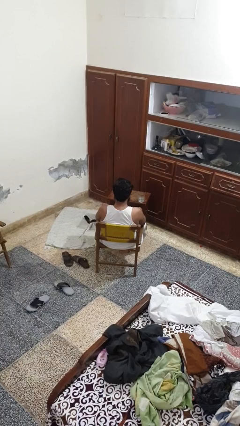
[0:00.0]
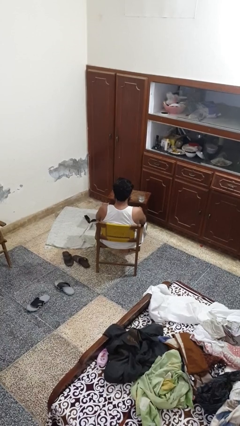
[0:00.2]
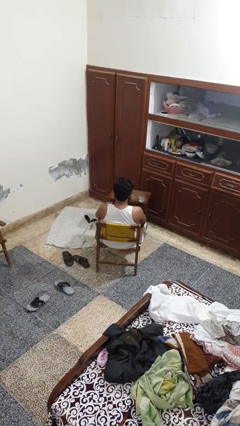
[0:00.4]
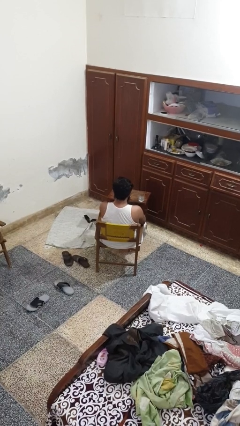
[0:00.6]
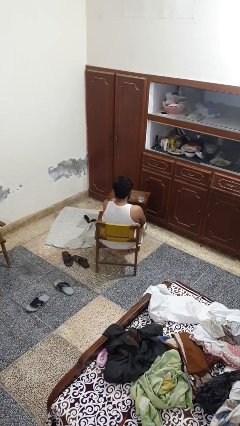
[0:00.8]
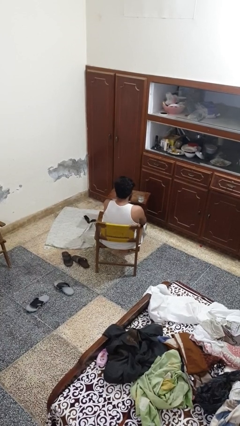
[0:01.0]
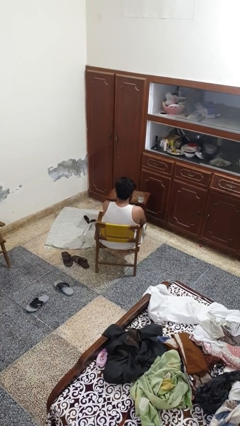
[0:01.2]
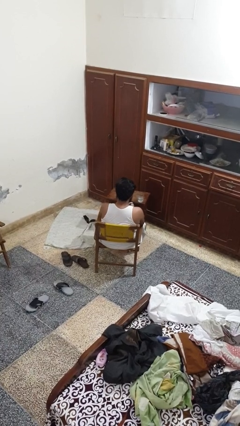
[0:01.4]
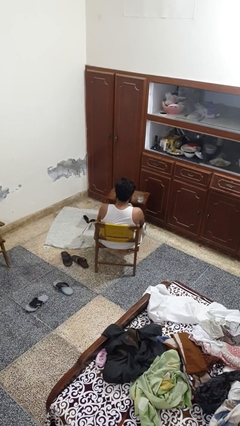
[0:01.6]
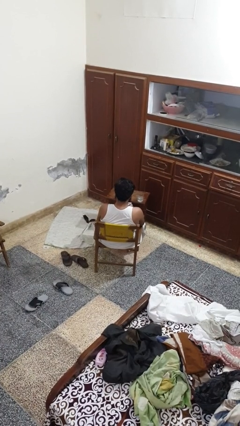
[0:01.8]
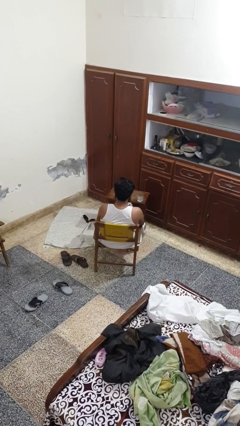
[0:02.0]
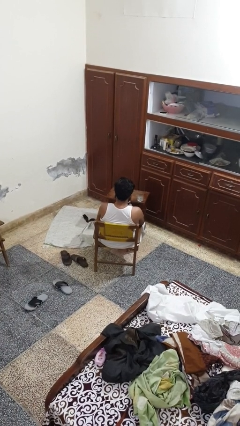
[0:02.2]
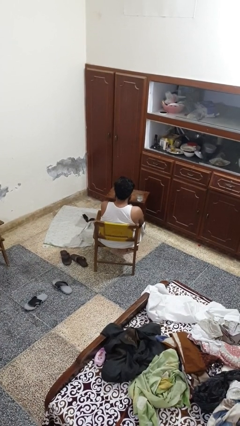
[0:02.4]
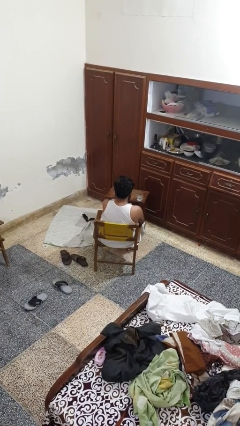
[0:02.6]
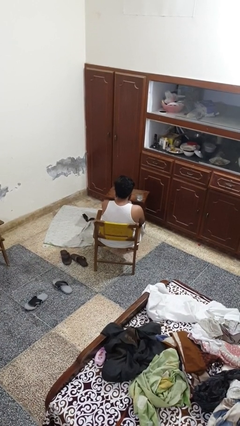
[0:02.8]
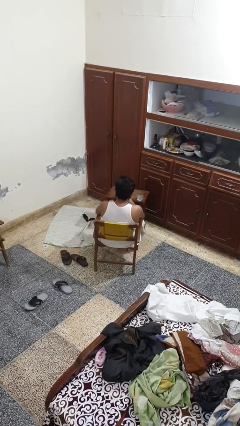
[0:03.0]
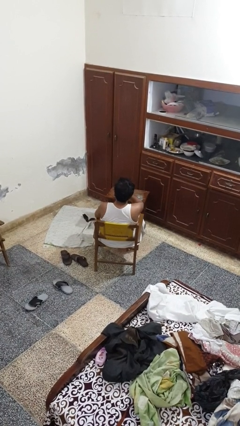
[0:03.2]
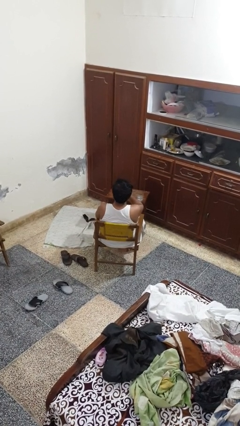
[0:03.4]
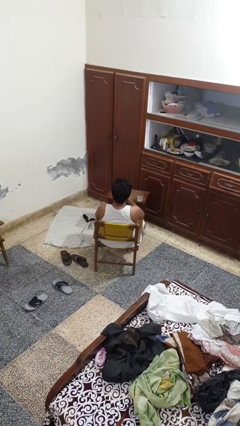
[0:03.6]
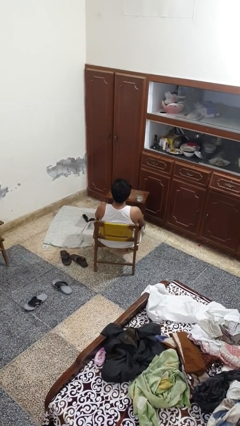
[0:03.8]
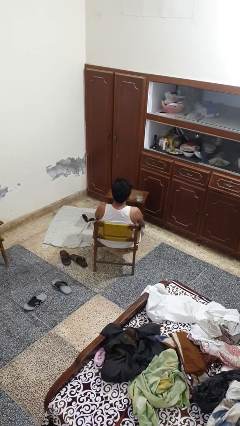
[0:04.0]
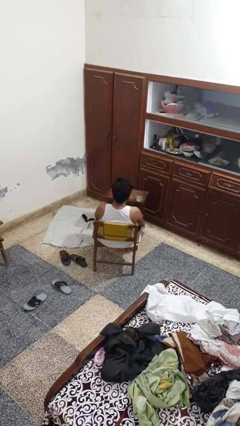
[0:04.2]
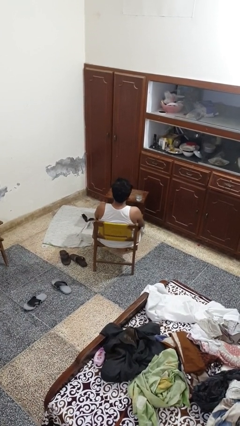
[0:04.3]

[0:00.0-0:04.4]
person takes medicine pills

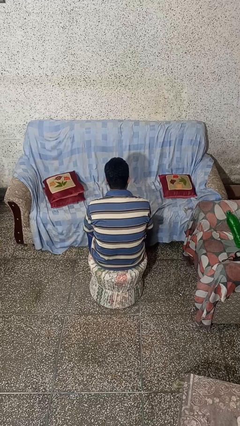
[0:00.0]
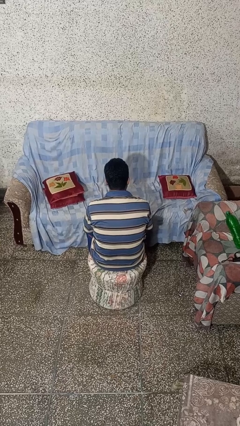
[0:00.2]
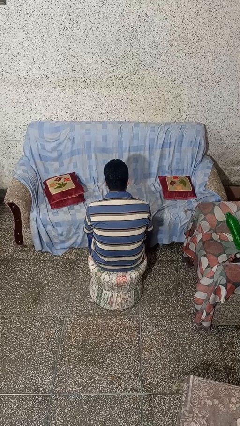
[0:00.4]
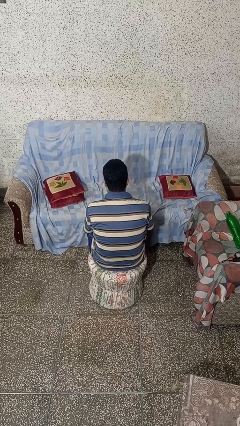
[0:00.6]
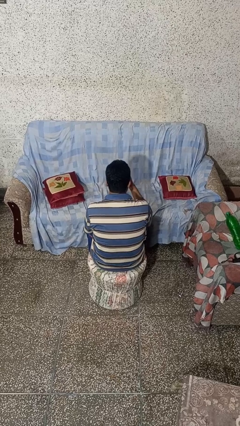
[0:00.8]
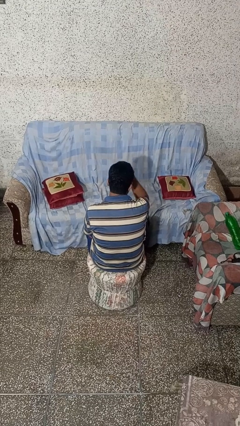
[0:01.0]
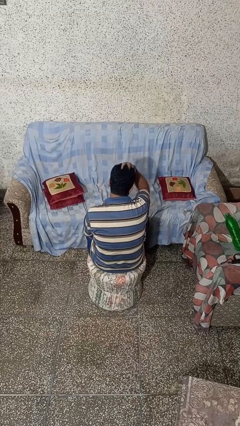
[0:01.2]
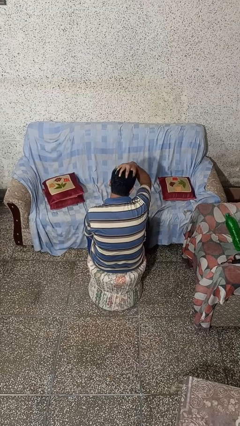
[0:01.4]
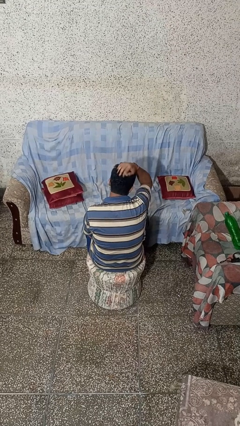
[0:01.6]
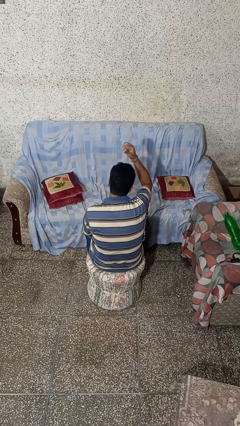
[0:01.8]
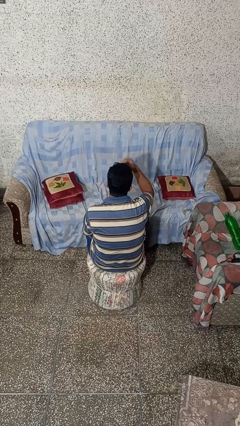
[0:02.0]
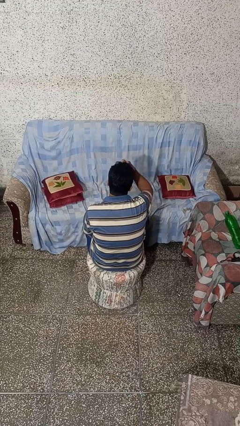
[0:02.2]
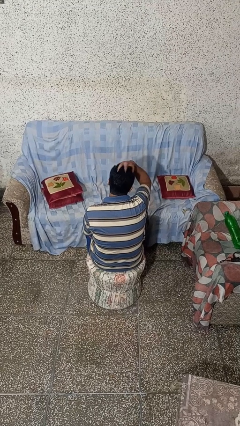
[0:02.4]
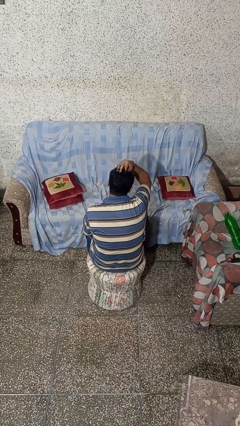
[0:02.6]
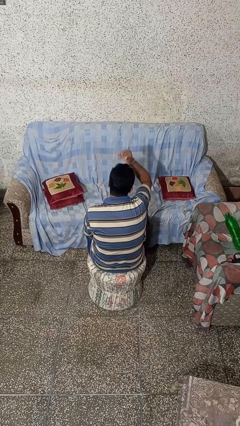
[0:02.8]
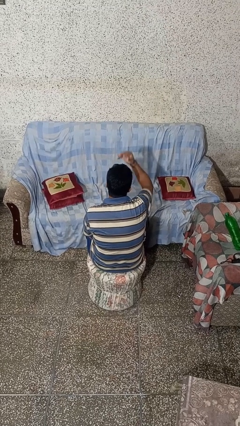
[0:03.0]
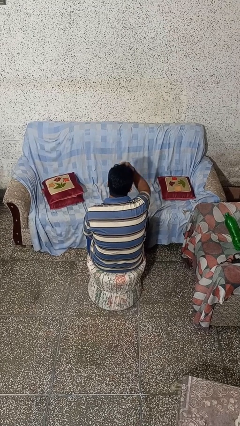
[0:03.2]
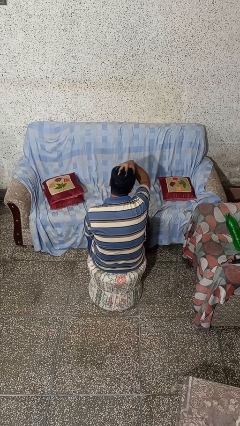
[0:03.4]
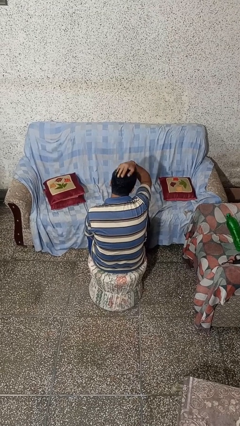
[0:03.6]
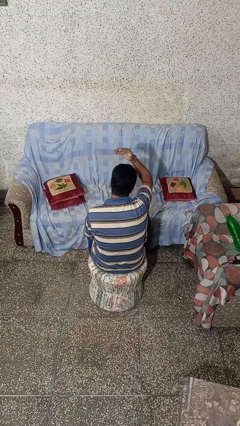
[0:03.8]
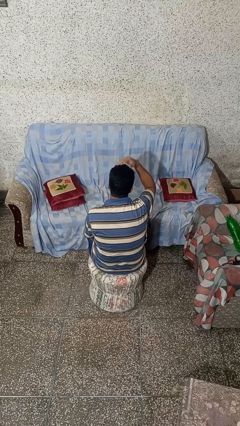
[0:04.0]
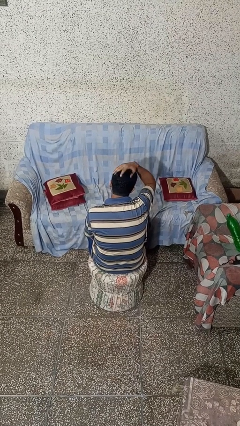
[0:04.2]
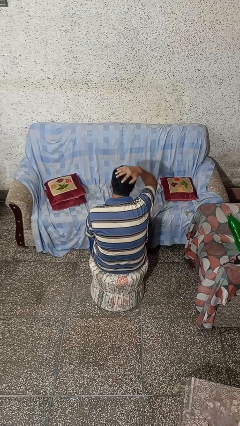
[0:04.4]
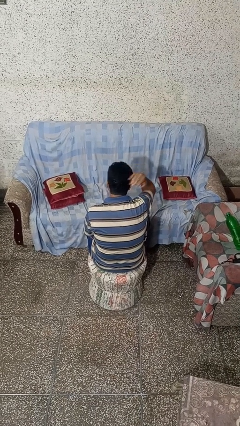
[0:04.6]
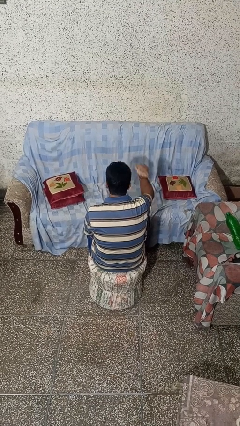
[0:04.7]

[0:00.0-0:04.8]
person strokes hair

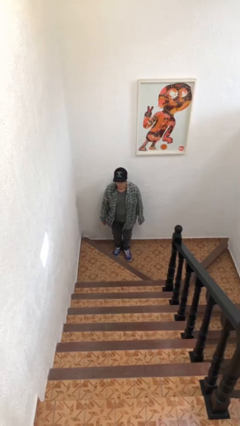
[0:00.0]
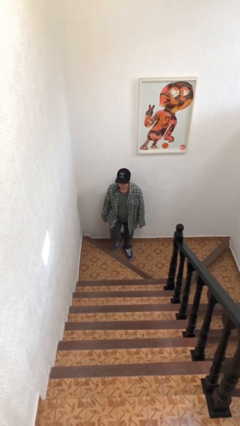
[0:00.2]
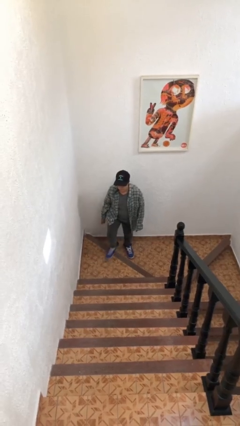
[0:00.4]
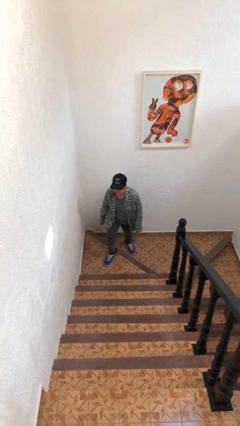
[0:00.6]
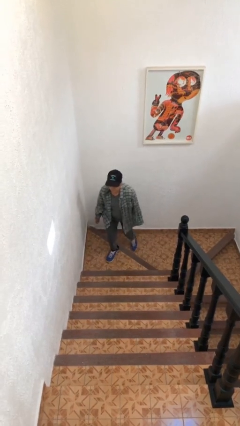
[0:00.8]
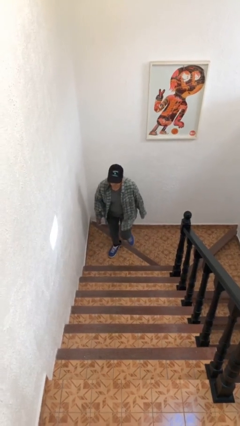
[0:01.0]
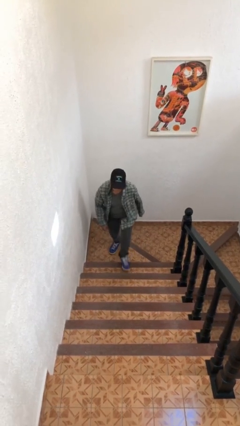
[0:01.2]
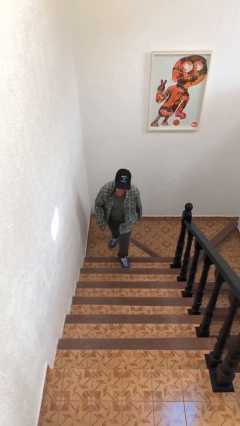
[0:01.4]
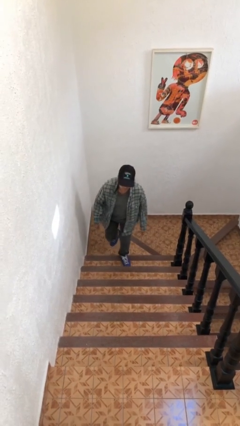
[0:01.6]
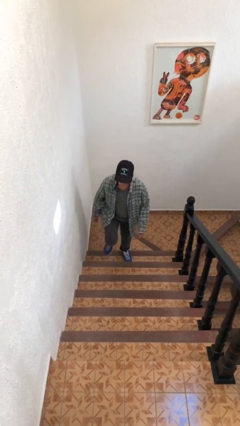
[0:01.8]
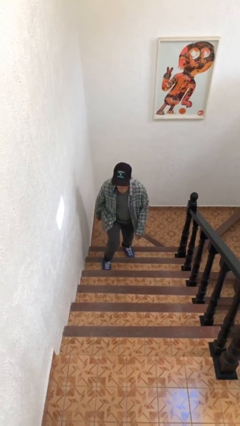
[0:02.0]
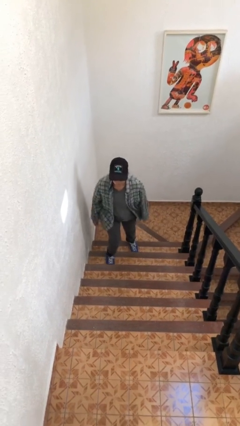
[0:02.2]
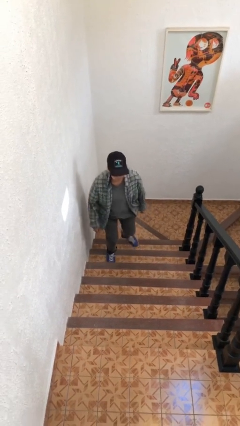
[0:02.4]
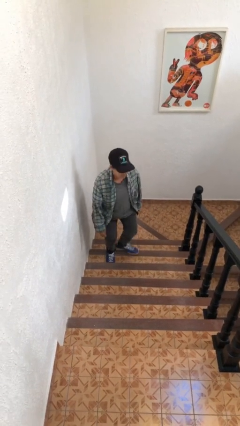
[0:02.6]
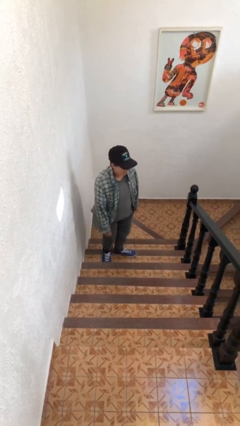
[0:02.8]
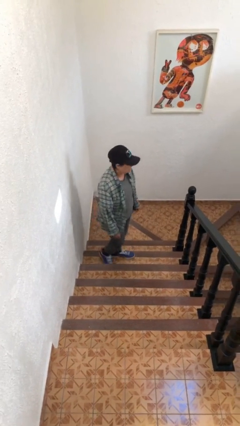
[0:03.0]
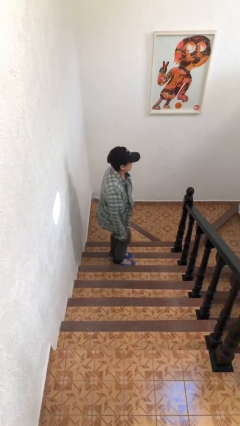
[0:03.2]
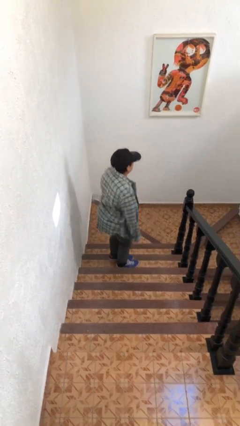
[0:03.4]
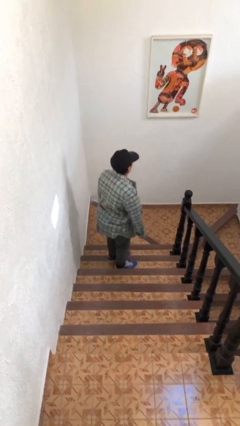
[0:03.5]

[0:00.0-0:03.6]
person climbs up stairs

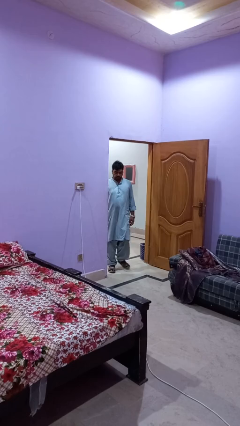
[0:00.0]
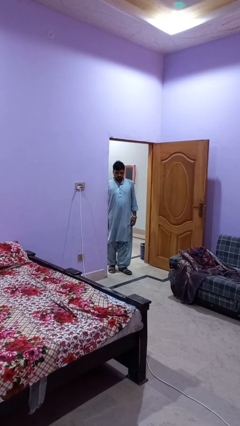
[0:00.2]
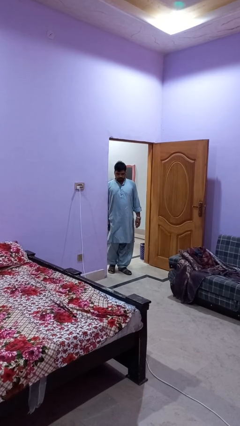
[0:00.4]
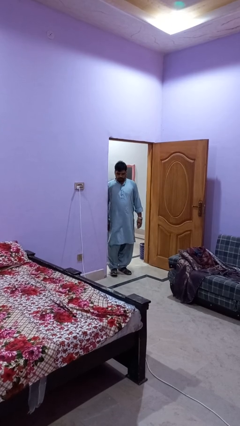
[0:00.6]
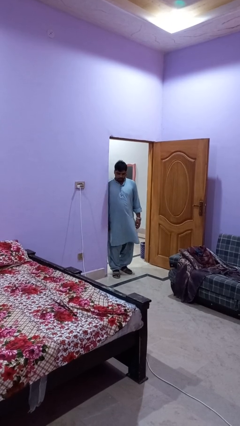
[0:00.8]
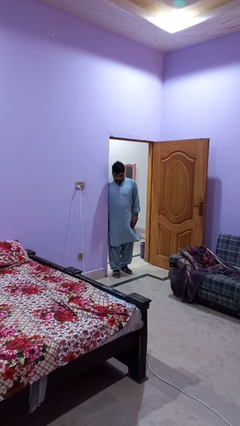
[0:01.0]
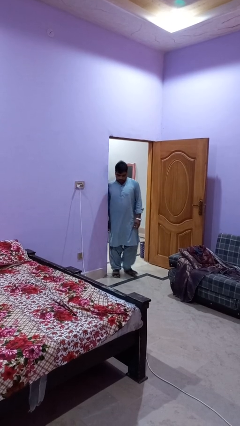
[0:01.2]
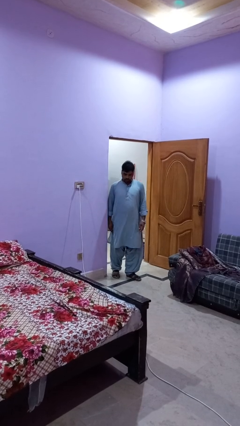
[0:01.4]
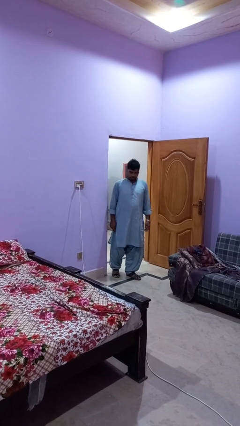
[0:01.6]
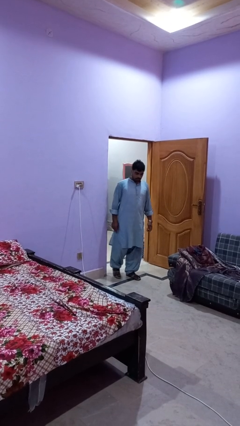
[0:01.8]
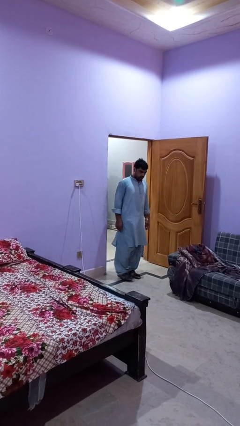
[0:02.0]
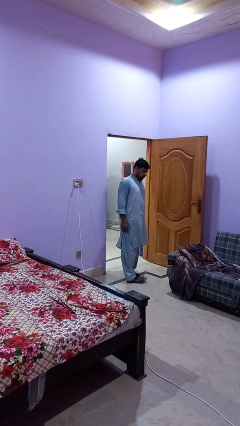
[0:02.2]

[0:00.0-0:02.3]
person bumps into wall

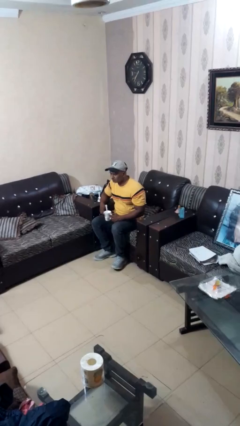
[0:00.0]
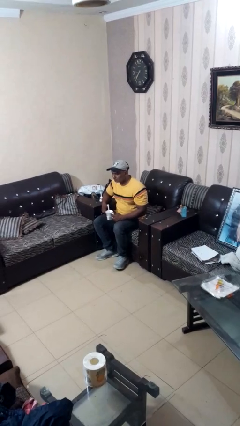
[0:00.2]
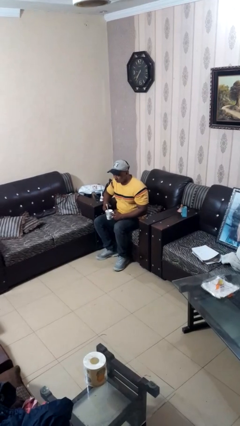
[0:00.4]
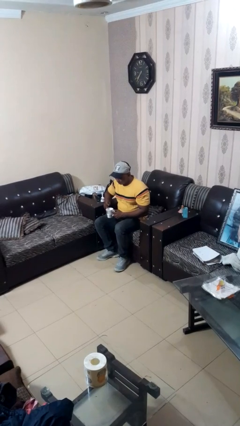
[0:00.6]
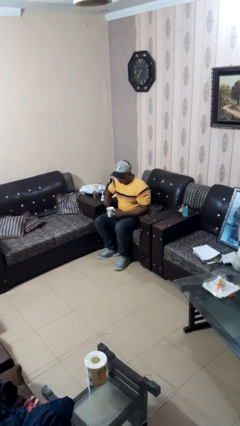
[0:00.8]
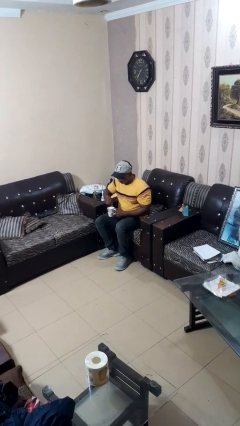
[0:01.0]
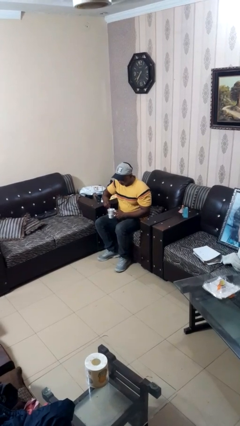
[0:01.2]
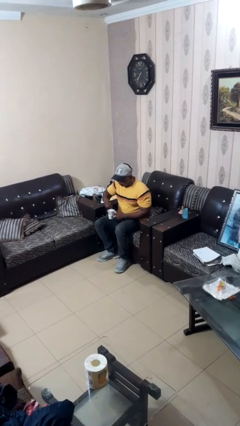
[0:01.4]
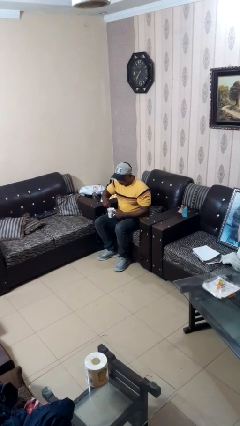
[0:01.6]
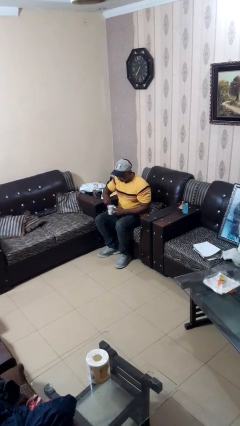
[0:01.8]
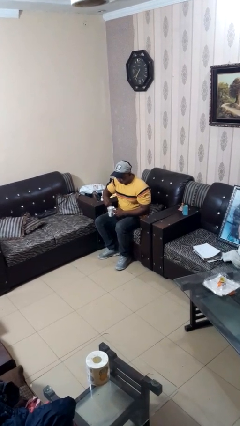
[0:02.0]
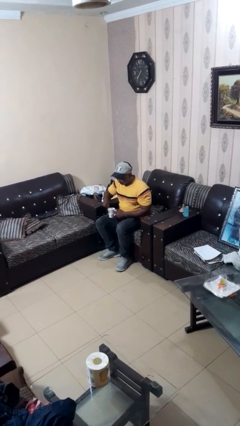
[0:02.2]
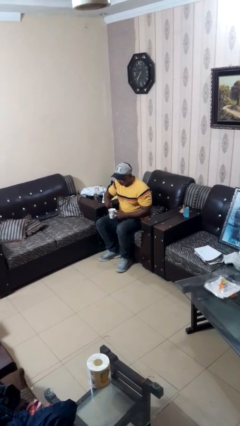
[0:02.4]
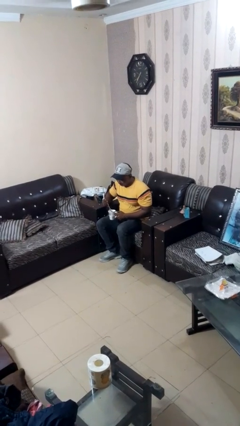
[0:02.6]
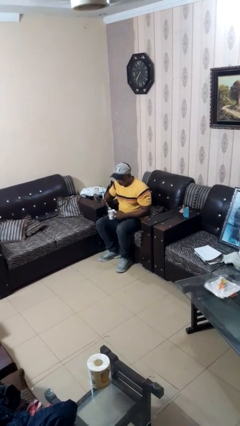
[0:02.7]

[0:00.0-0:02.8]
person stirs mug
